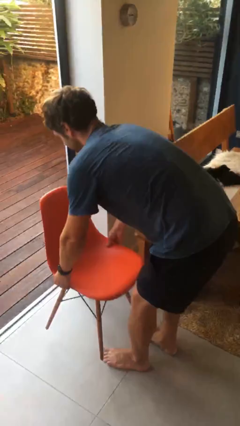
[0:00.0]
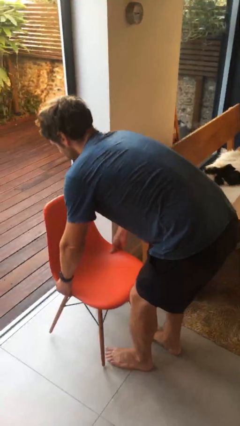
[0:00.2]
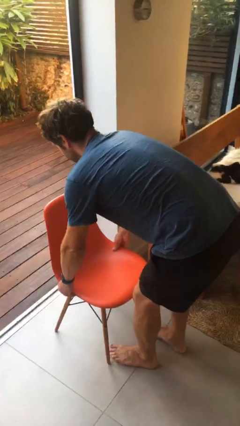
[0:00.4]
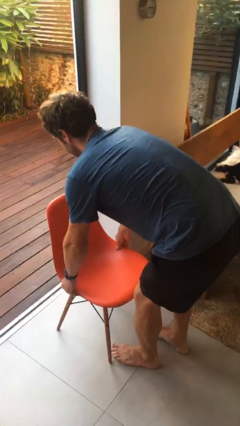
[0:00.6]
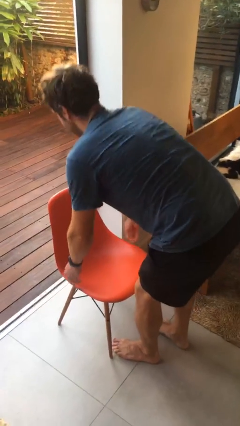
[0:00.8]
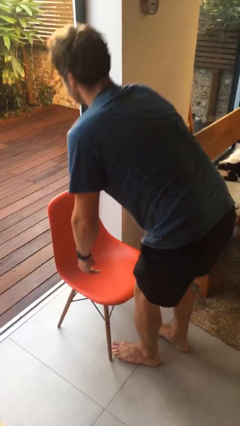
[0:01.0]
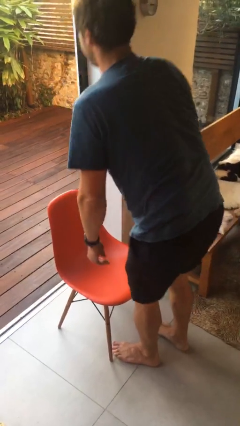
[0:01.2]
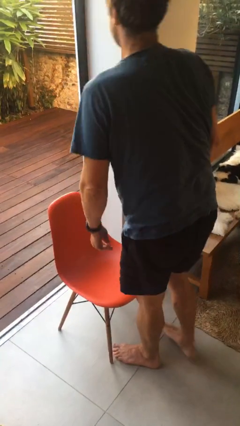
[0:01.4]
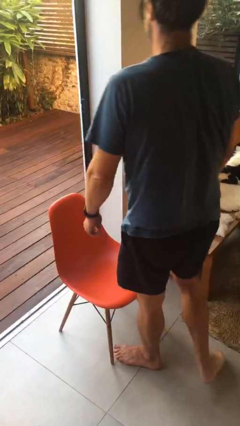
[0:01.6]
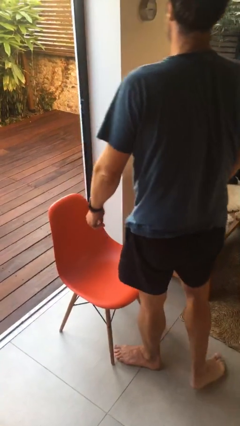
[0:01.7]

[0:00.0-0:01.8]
person puts down object on floor

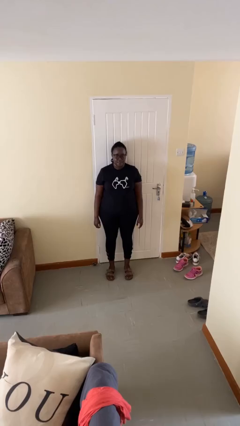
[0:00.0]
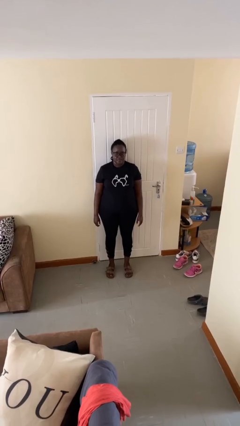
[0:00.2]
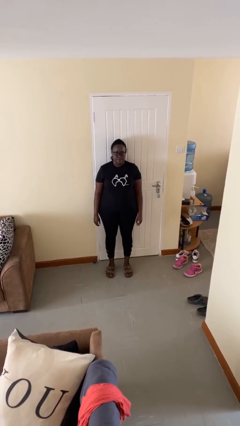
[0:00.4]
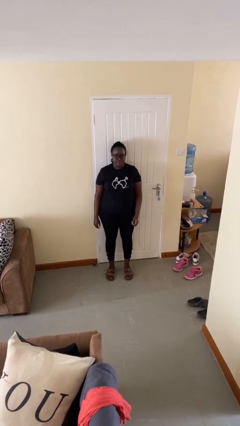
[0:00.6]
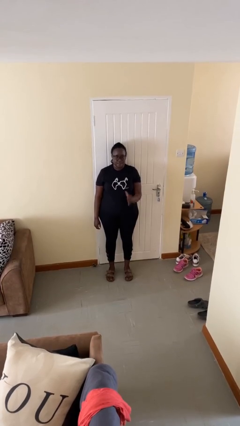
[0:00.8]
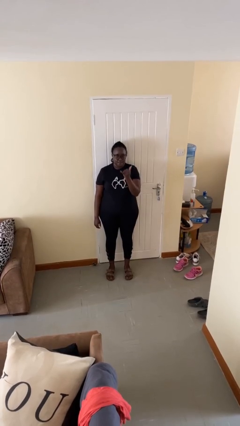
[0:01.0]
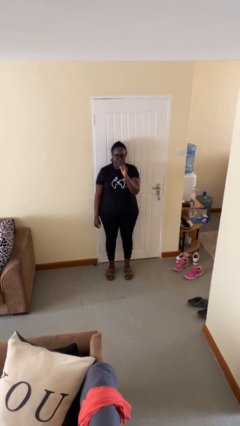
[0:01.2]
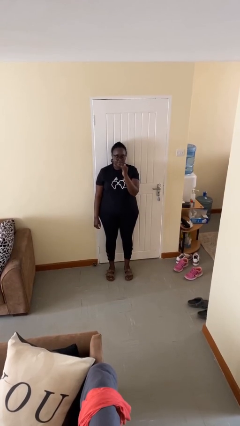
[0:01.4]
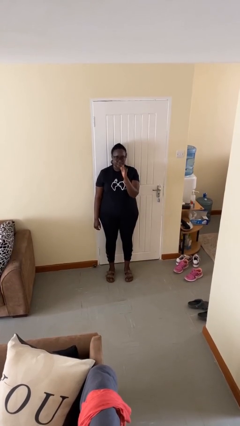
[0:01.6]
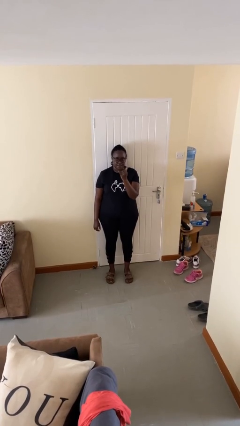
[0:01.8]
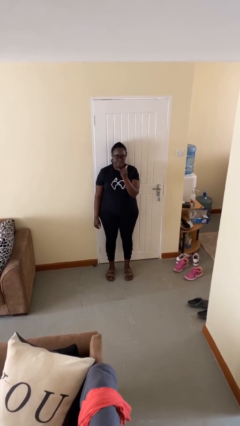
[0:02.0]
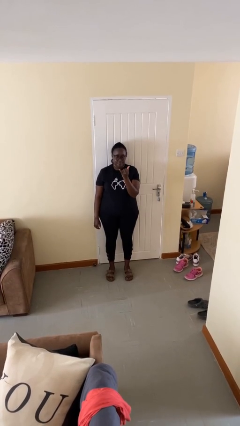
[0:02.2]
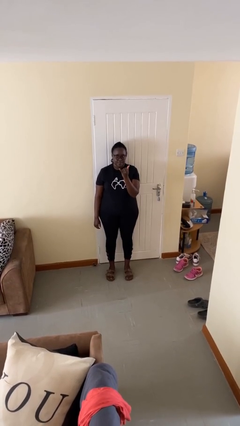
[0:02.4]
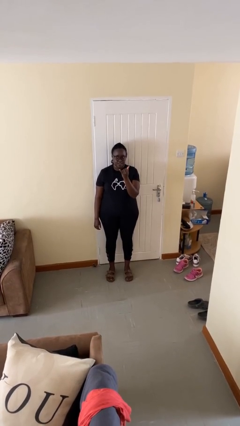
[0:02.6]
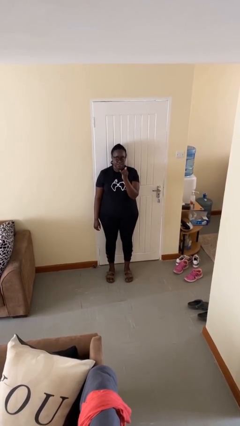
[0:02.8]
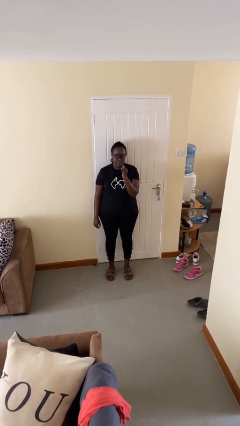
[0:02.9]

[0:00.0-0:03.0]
person gestures hang loose

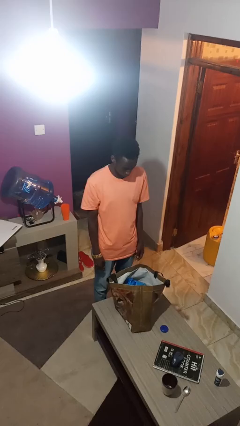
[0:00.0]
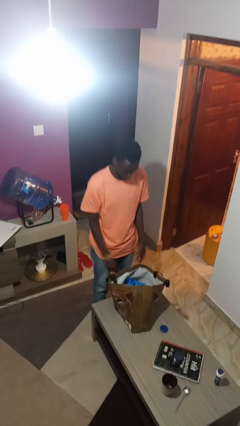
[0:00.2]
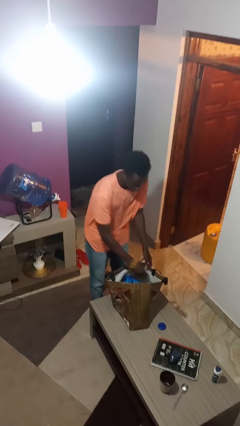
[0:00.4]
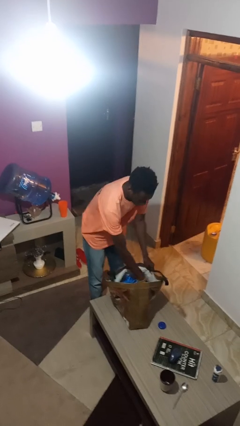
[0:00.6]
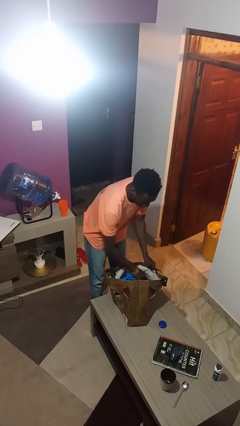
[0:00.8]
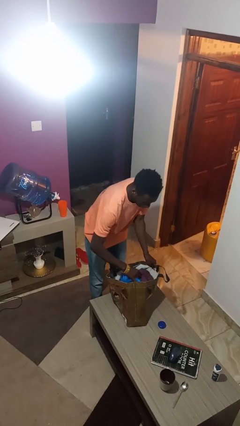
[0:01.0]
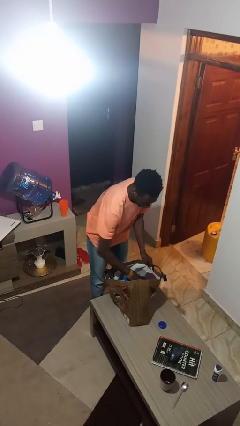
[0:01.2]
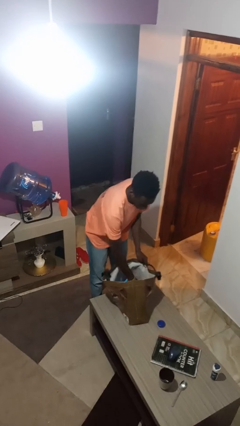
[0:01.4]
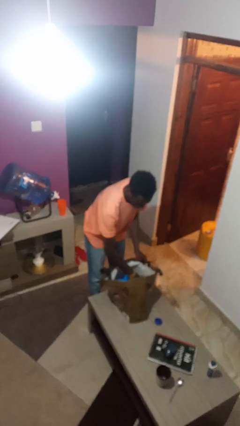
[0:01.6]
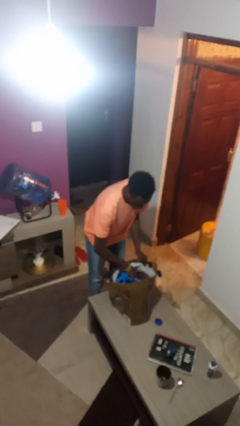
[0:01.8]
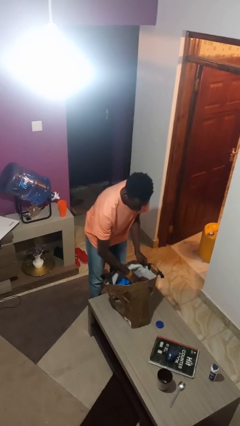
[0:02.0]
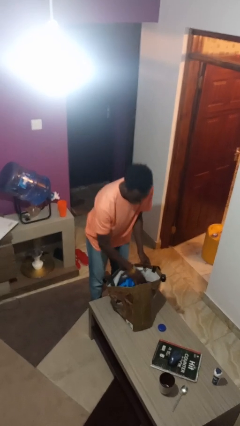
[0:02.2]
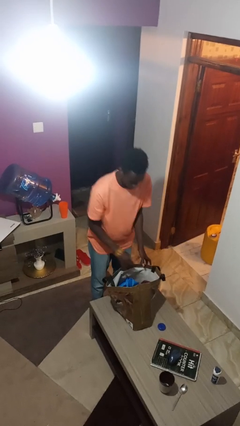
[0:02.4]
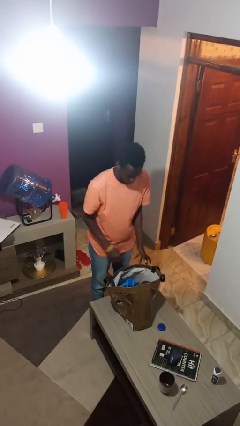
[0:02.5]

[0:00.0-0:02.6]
person searches in bag

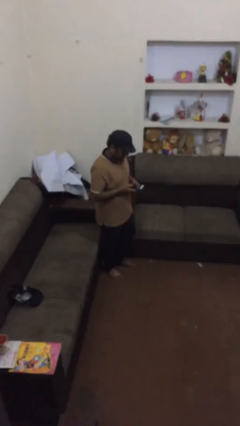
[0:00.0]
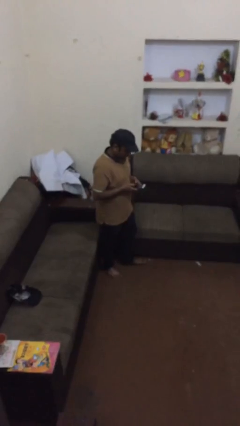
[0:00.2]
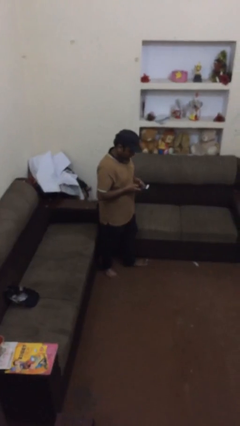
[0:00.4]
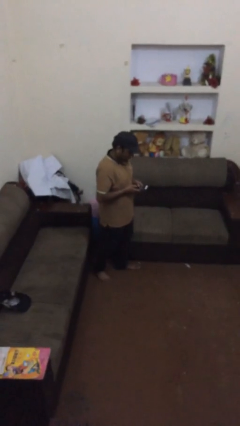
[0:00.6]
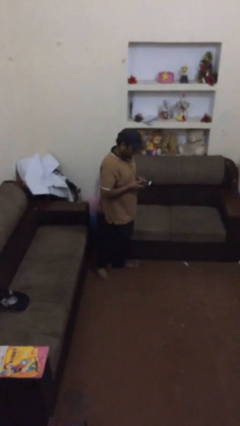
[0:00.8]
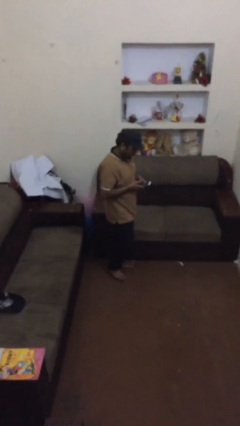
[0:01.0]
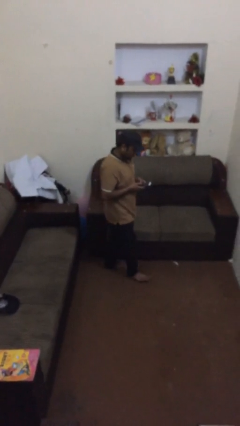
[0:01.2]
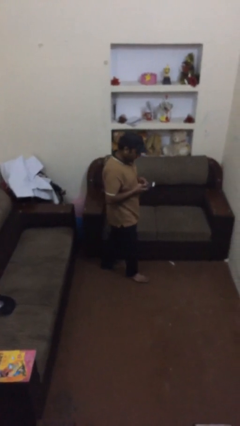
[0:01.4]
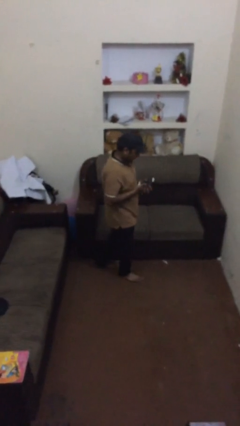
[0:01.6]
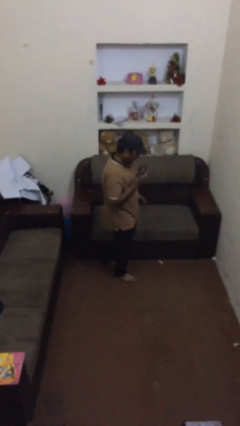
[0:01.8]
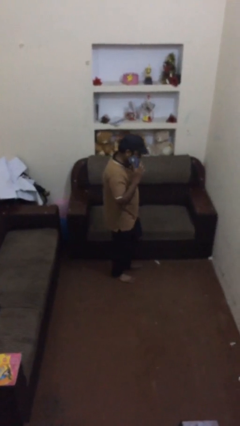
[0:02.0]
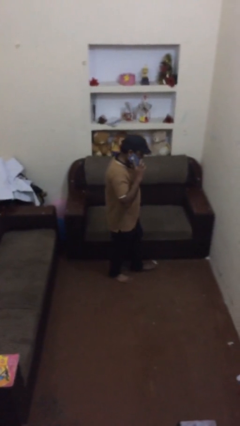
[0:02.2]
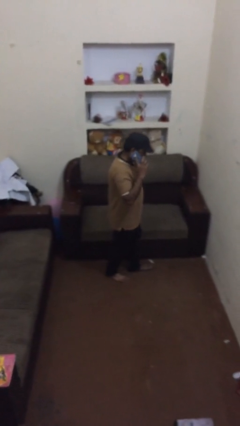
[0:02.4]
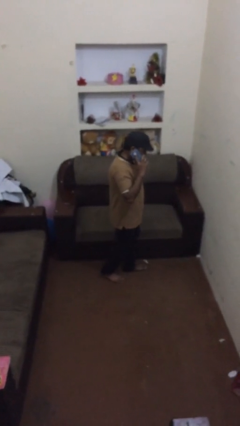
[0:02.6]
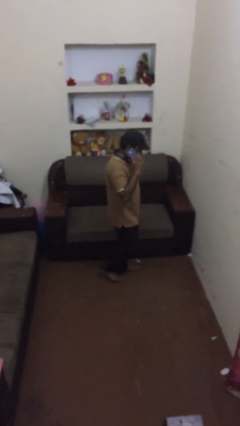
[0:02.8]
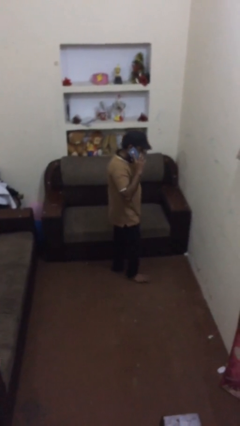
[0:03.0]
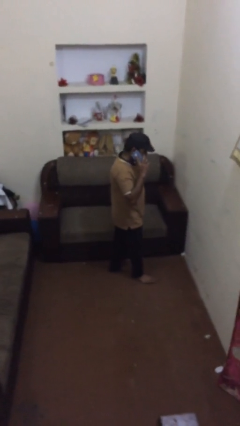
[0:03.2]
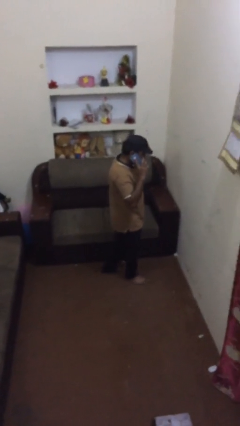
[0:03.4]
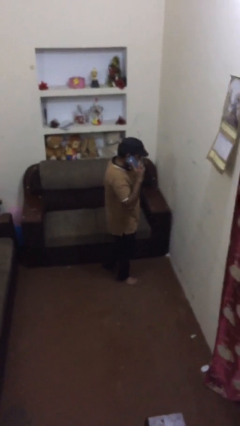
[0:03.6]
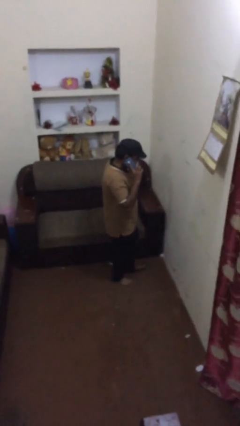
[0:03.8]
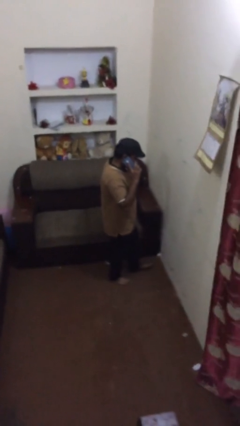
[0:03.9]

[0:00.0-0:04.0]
person talks on phone

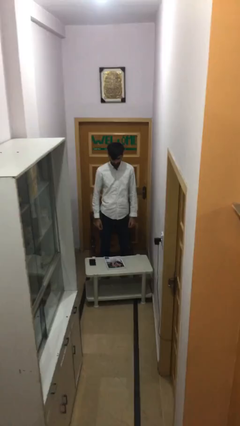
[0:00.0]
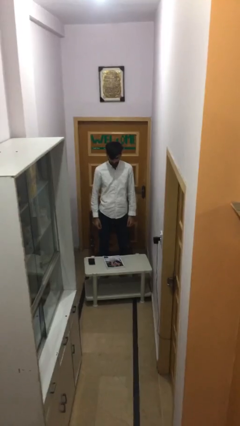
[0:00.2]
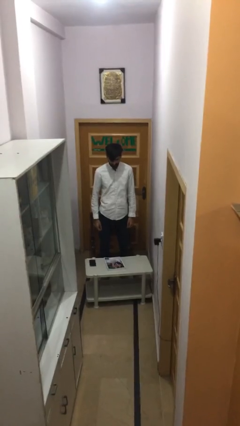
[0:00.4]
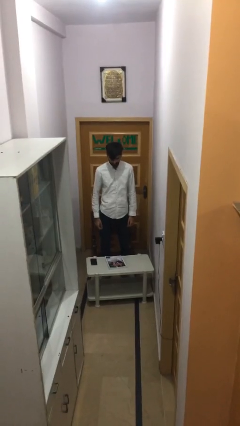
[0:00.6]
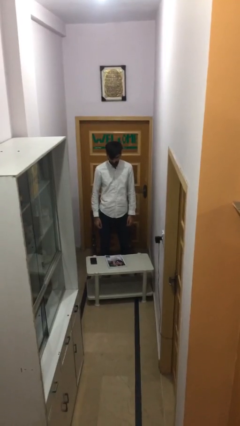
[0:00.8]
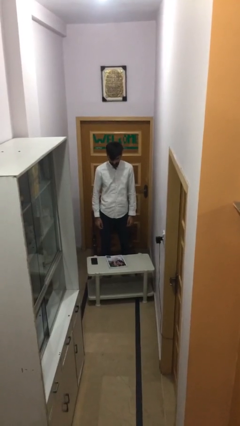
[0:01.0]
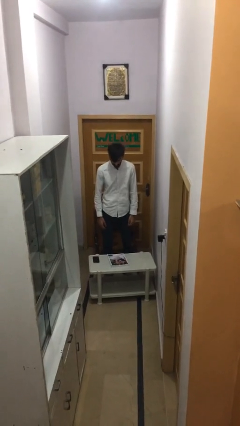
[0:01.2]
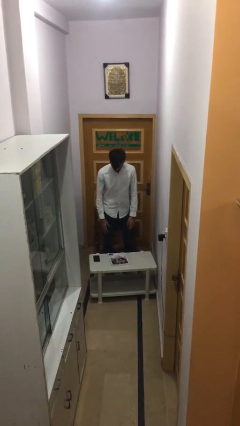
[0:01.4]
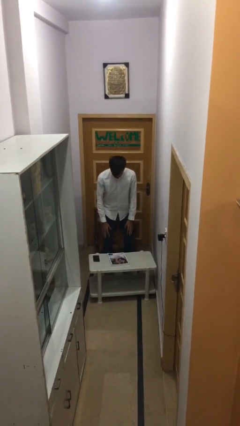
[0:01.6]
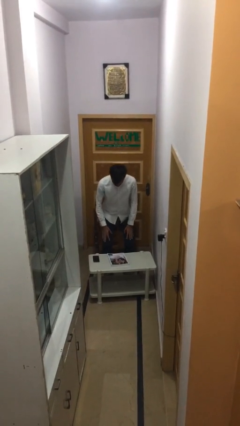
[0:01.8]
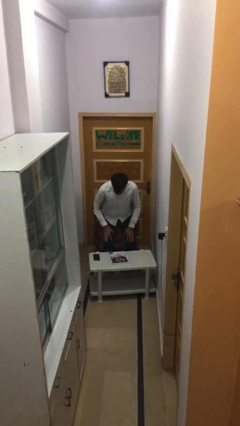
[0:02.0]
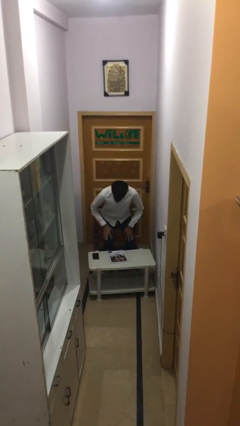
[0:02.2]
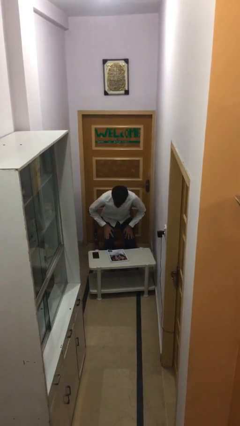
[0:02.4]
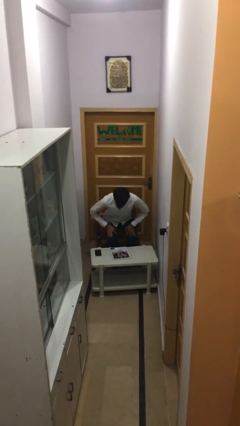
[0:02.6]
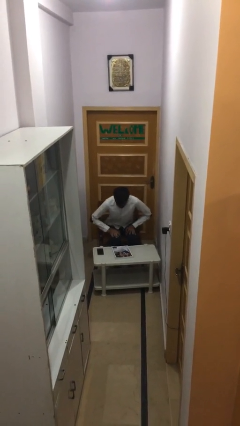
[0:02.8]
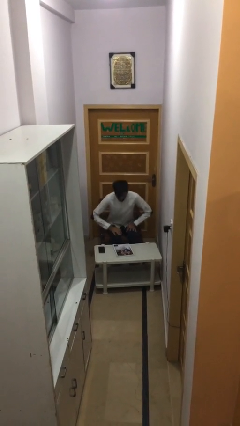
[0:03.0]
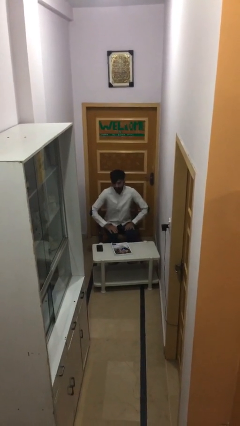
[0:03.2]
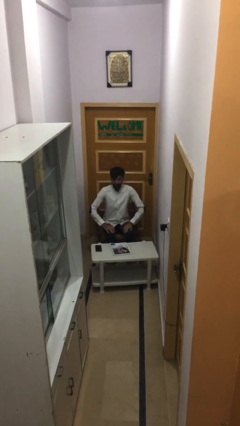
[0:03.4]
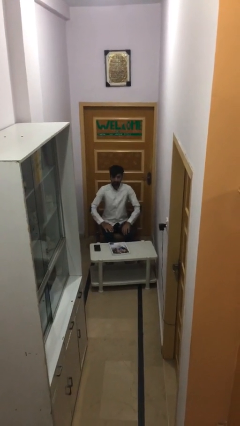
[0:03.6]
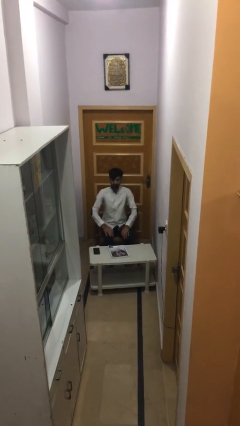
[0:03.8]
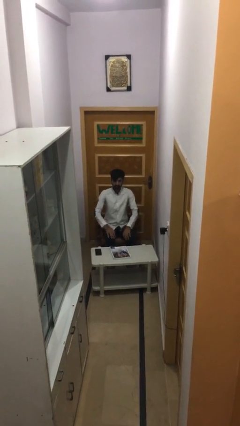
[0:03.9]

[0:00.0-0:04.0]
person sits down

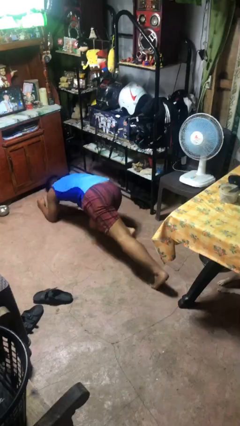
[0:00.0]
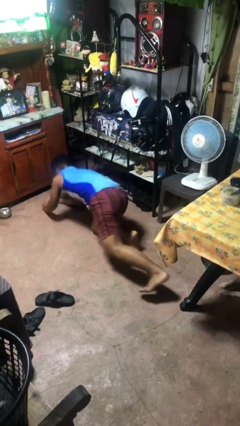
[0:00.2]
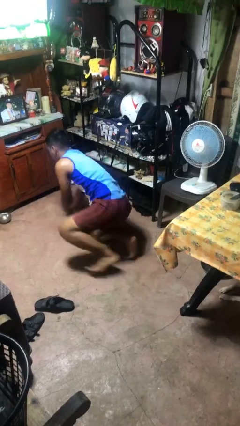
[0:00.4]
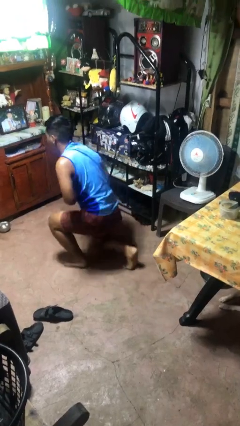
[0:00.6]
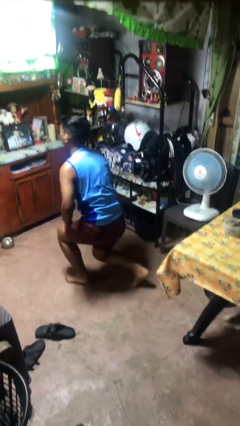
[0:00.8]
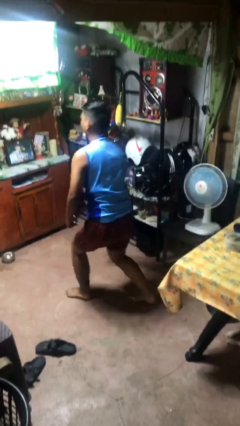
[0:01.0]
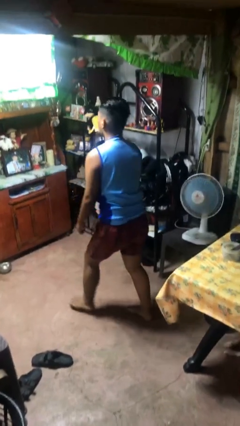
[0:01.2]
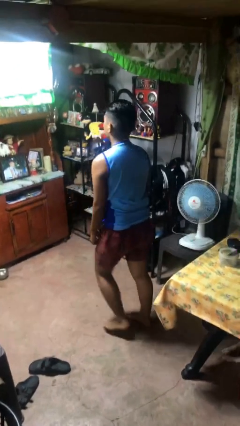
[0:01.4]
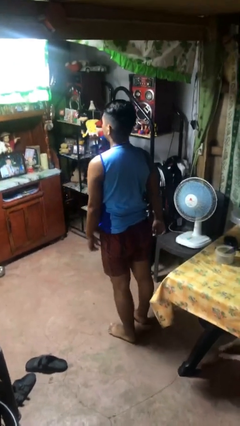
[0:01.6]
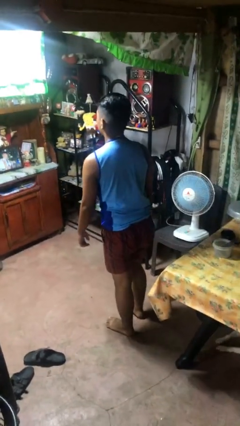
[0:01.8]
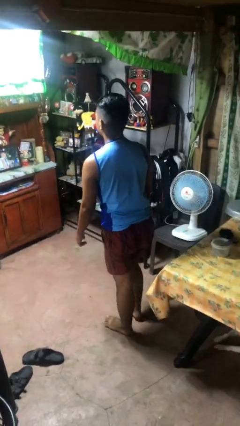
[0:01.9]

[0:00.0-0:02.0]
person stands up from floor

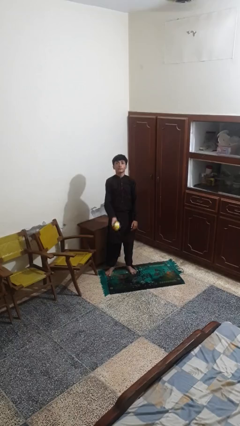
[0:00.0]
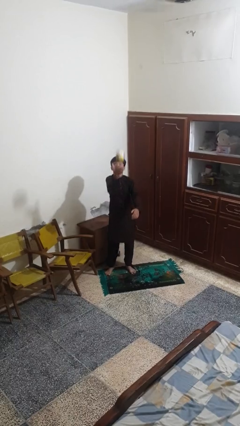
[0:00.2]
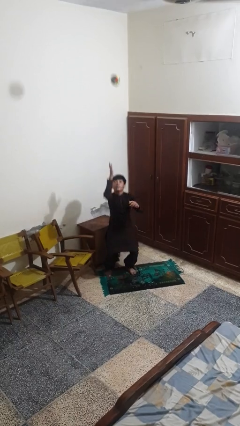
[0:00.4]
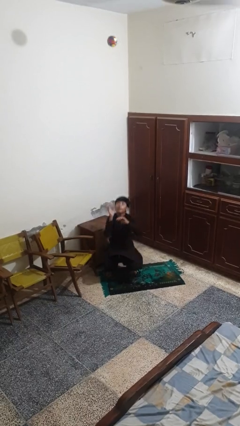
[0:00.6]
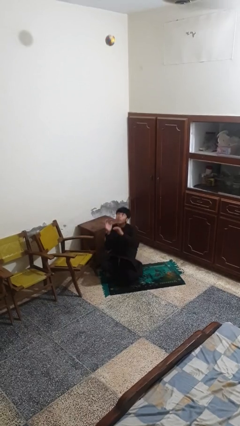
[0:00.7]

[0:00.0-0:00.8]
person drops object
